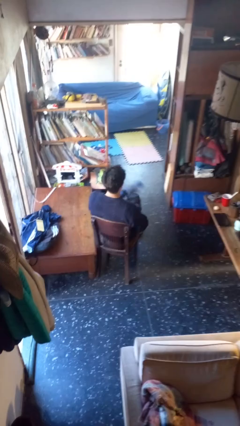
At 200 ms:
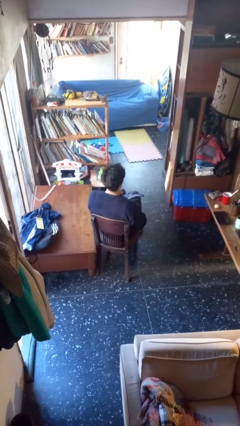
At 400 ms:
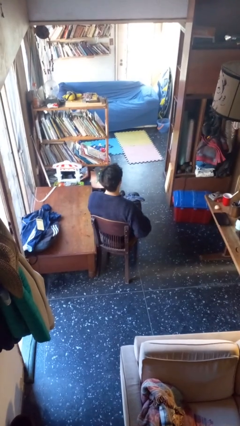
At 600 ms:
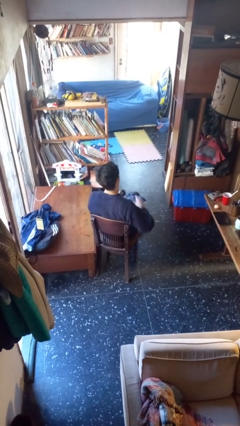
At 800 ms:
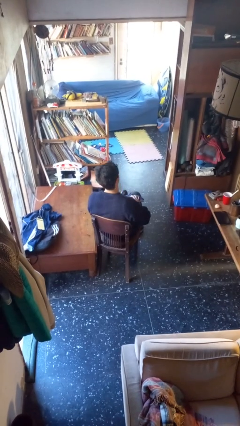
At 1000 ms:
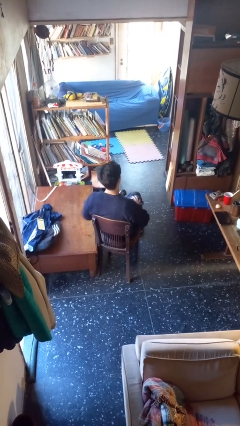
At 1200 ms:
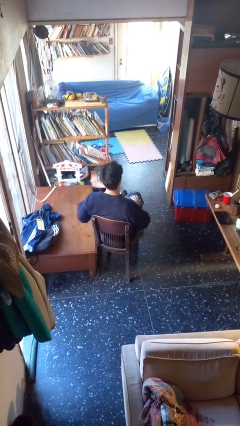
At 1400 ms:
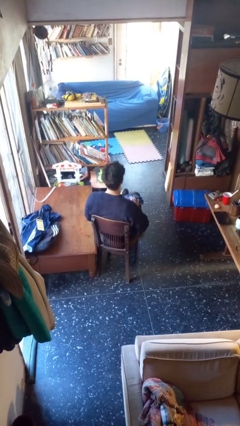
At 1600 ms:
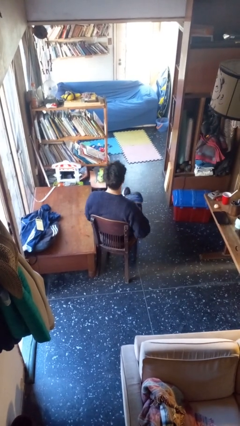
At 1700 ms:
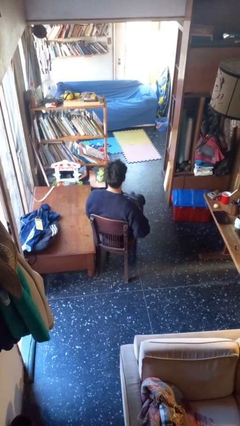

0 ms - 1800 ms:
person takes off gloves

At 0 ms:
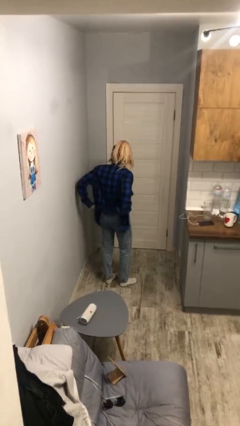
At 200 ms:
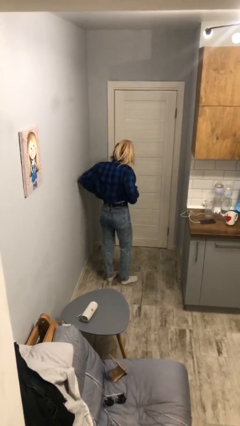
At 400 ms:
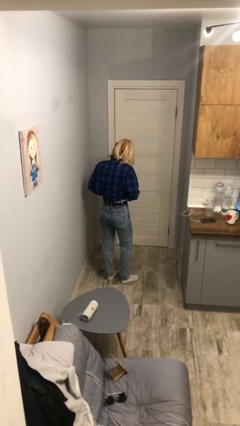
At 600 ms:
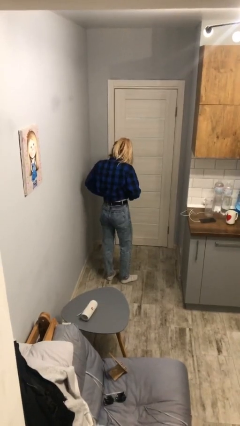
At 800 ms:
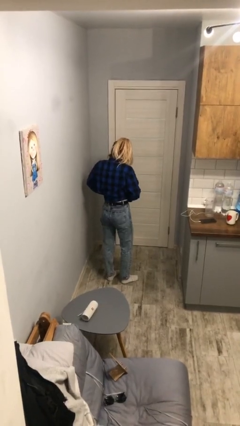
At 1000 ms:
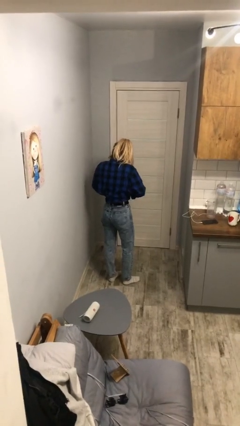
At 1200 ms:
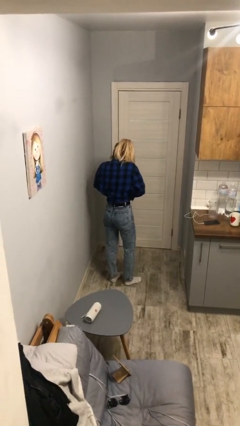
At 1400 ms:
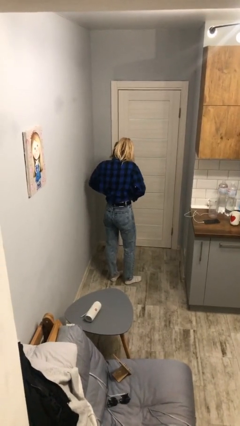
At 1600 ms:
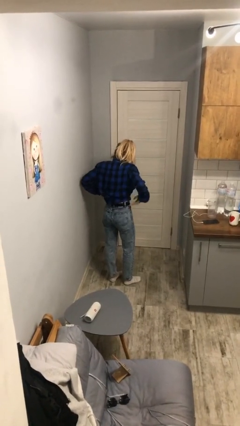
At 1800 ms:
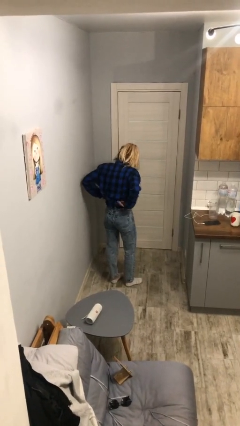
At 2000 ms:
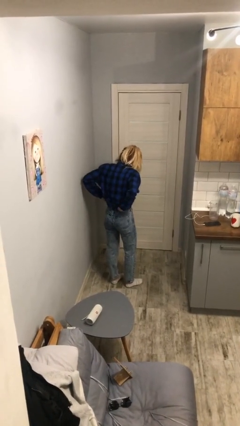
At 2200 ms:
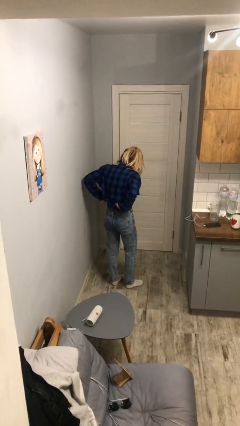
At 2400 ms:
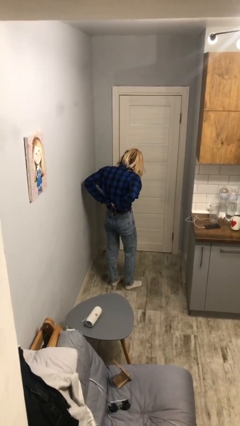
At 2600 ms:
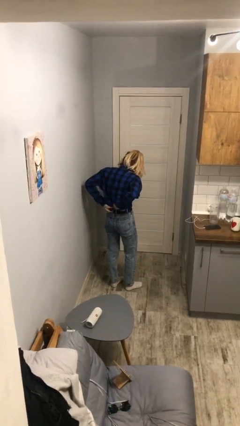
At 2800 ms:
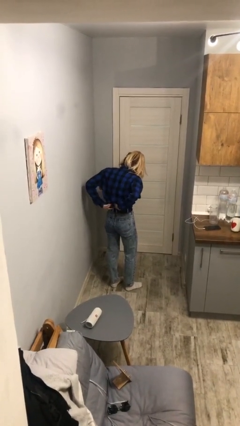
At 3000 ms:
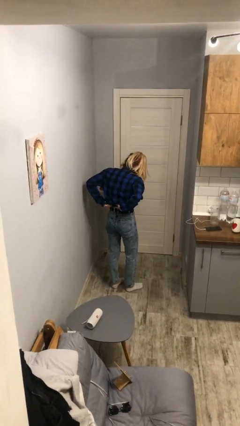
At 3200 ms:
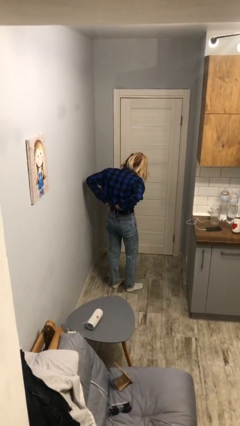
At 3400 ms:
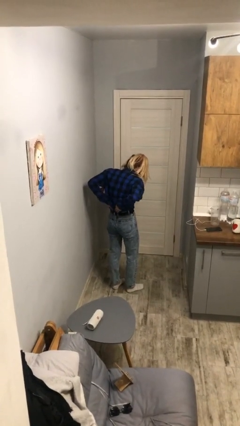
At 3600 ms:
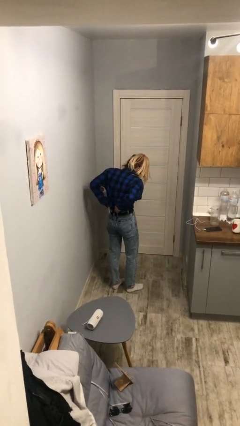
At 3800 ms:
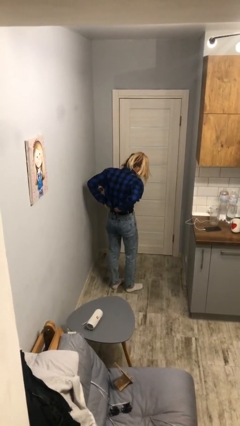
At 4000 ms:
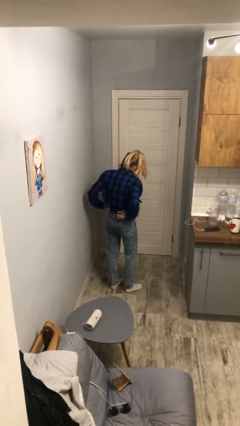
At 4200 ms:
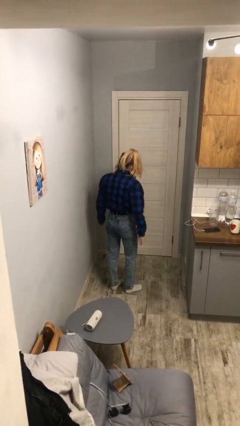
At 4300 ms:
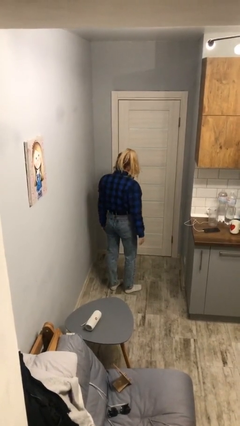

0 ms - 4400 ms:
person tucks in shirt

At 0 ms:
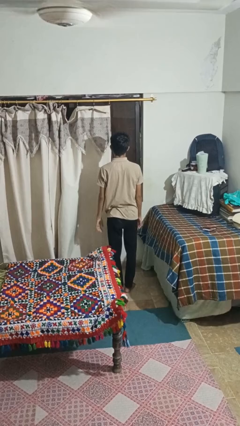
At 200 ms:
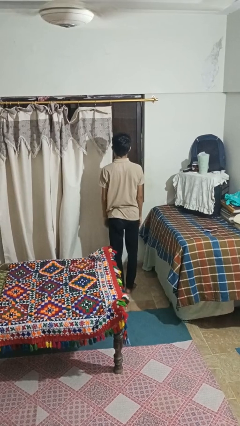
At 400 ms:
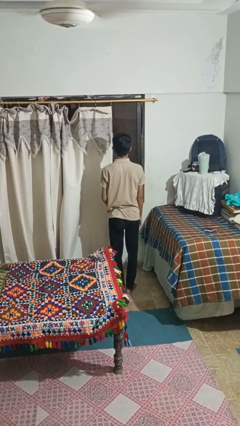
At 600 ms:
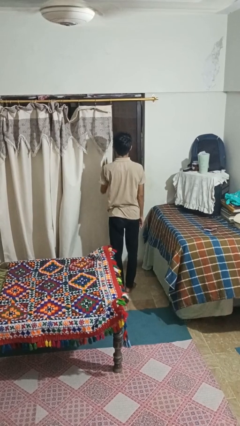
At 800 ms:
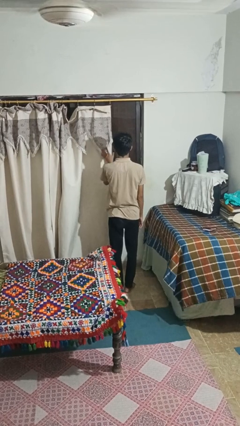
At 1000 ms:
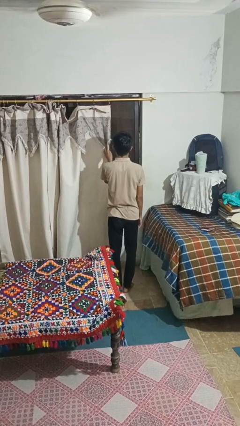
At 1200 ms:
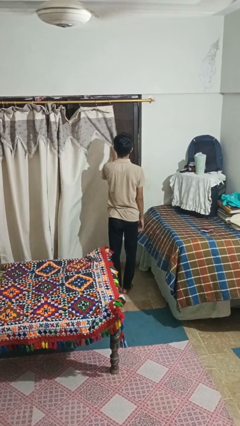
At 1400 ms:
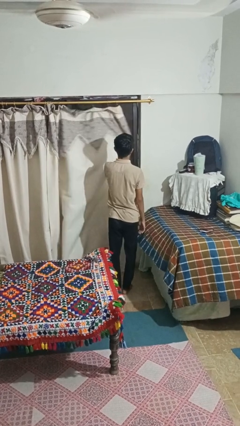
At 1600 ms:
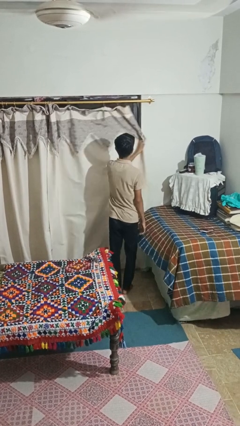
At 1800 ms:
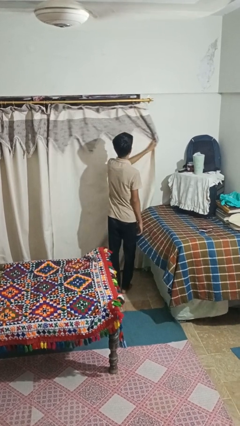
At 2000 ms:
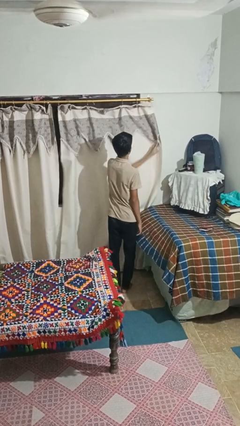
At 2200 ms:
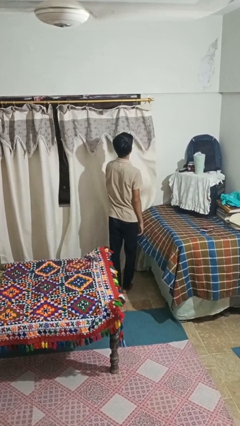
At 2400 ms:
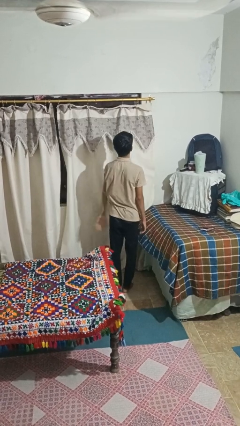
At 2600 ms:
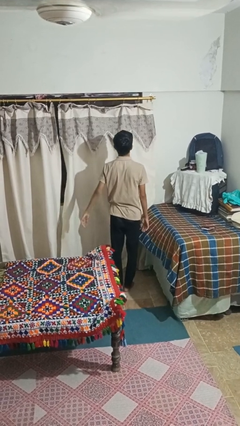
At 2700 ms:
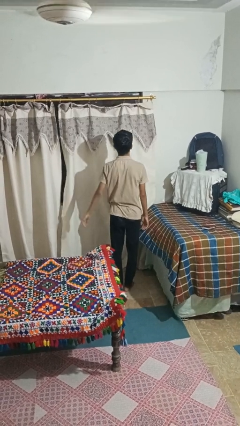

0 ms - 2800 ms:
person closes curtains

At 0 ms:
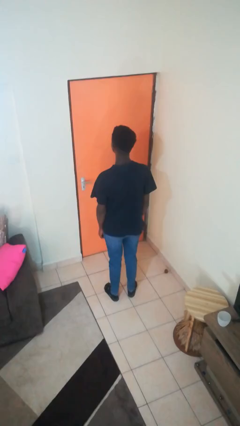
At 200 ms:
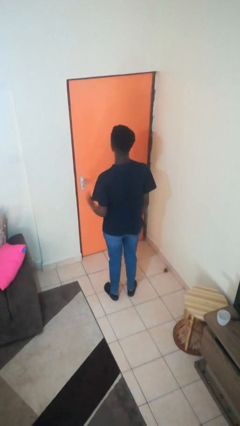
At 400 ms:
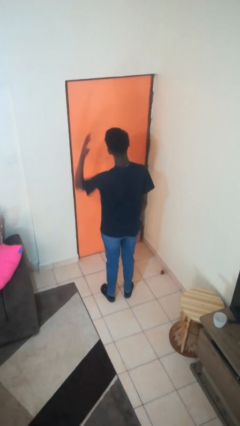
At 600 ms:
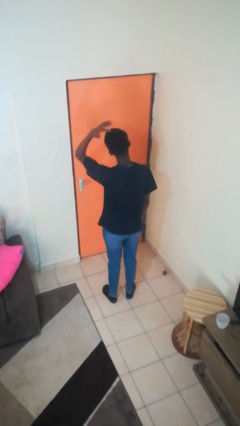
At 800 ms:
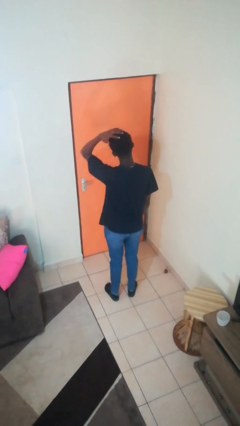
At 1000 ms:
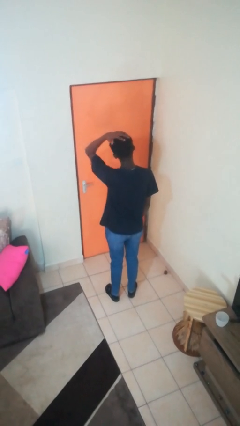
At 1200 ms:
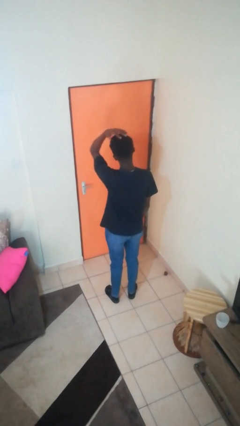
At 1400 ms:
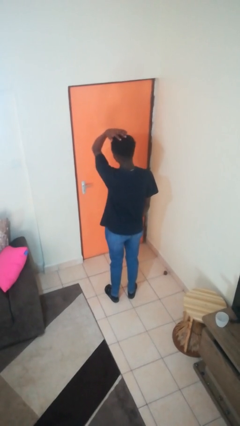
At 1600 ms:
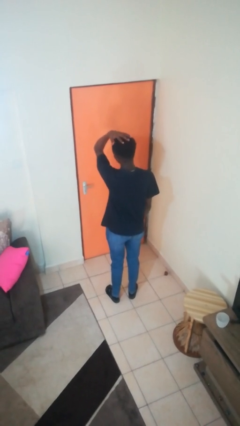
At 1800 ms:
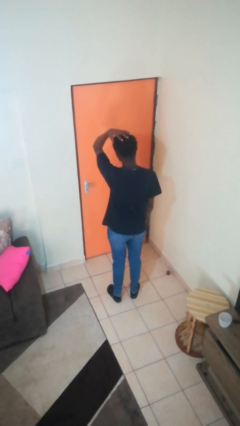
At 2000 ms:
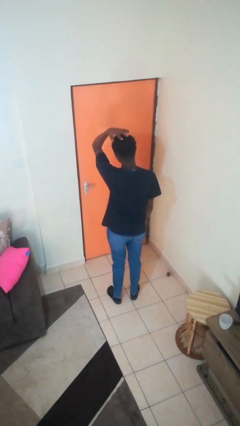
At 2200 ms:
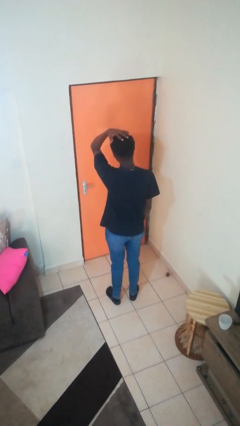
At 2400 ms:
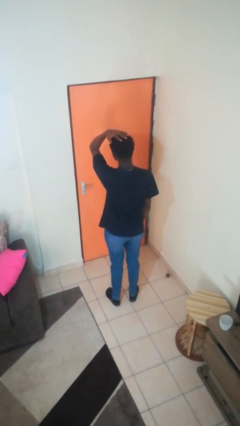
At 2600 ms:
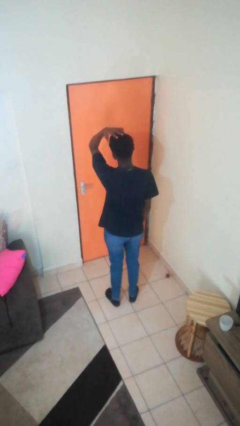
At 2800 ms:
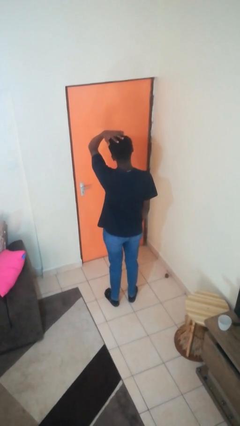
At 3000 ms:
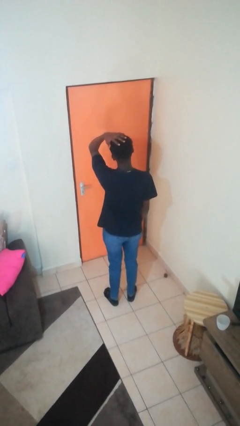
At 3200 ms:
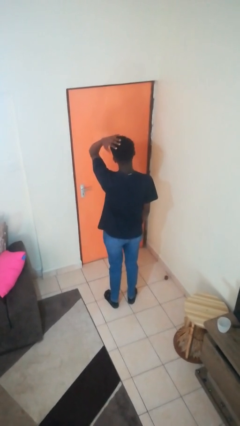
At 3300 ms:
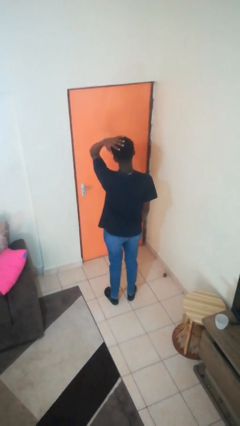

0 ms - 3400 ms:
person pats head

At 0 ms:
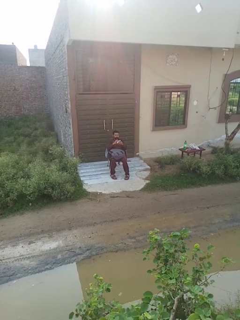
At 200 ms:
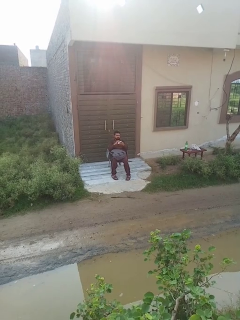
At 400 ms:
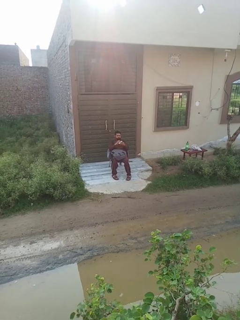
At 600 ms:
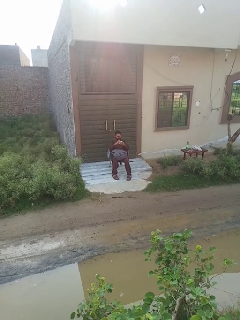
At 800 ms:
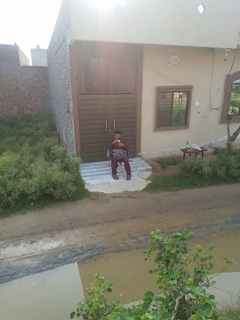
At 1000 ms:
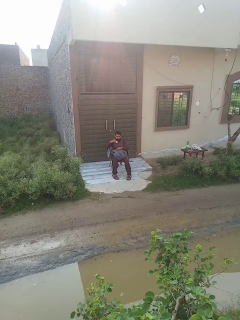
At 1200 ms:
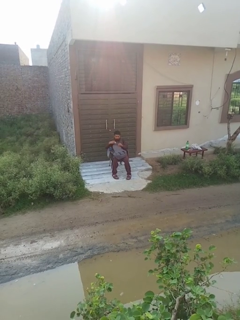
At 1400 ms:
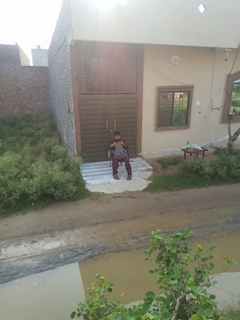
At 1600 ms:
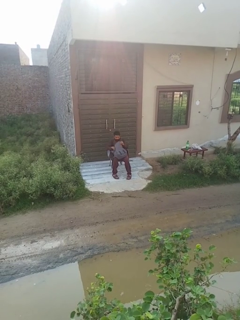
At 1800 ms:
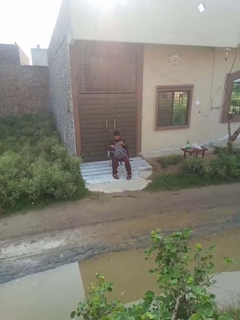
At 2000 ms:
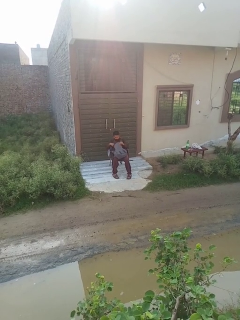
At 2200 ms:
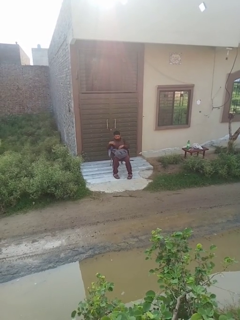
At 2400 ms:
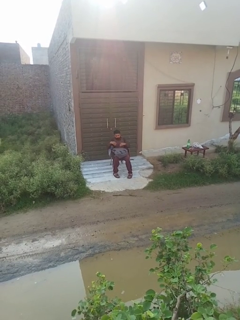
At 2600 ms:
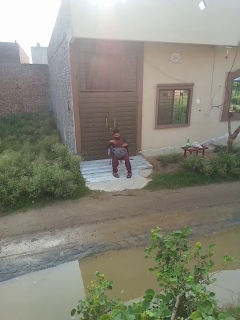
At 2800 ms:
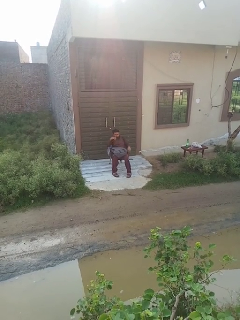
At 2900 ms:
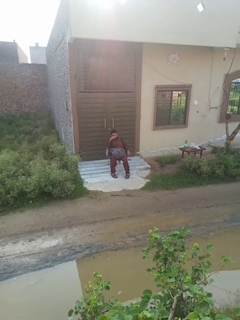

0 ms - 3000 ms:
person puts object into backpack

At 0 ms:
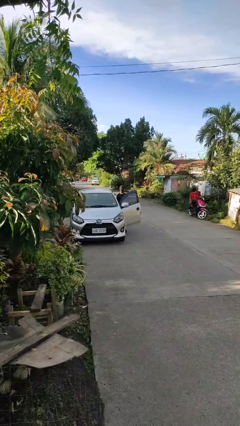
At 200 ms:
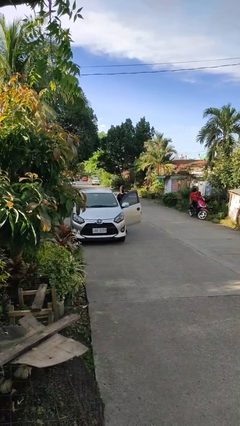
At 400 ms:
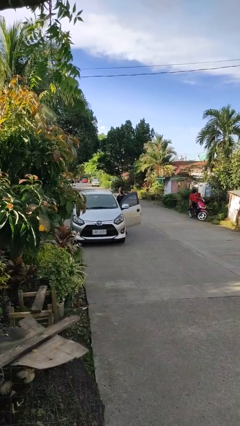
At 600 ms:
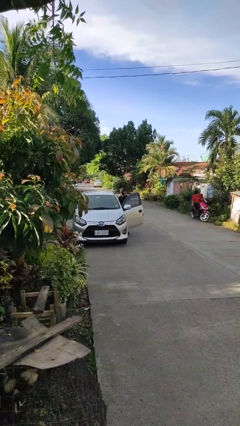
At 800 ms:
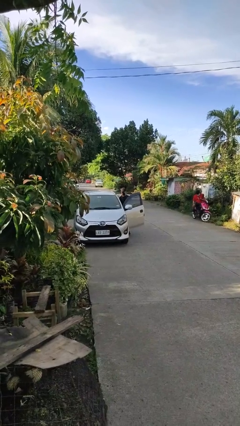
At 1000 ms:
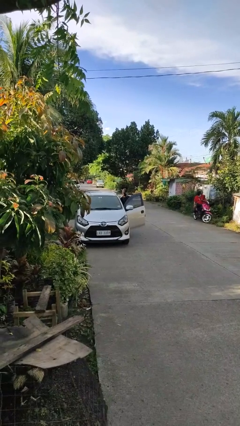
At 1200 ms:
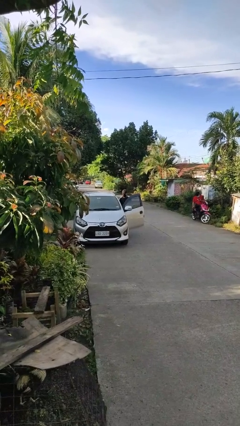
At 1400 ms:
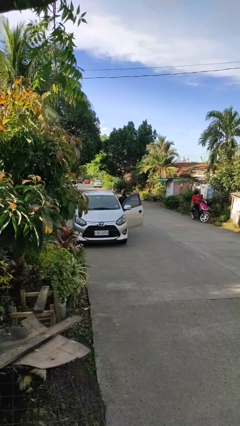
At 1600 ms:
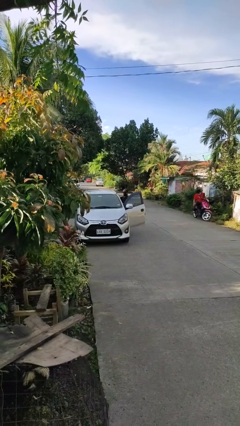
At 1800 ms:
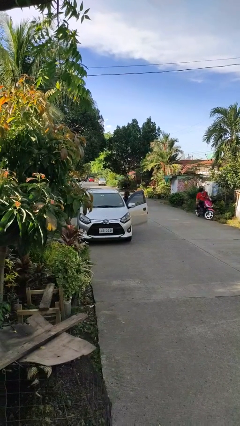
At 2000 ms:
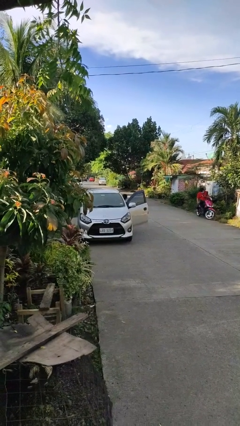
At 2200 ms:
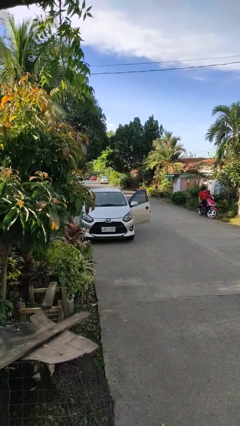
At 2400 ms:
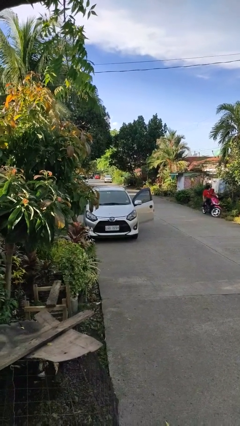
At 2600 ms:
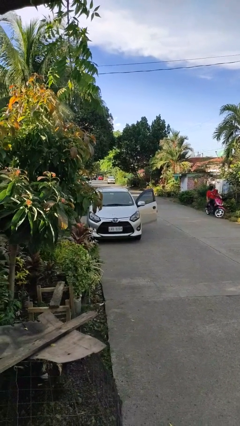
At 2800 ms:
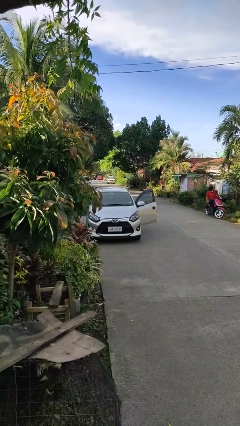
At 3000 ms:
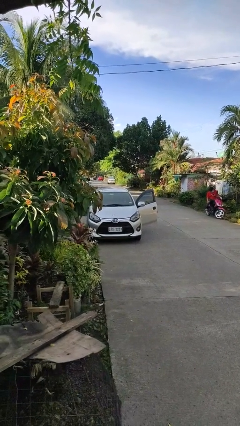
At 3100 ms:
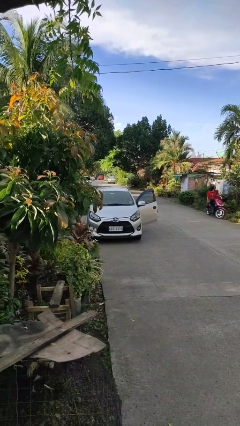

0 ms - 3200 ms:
person enters car
